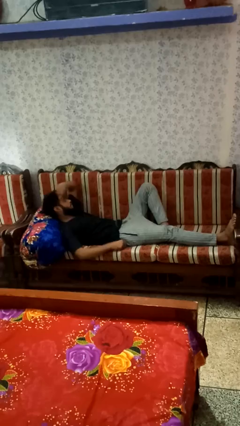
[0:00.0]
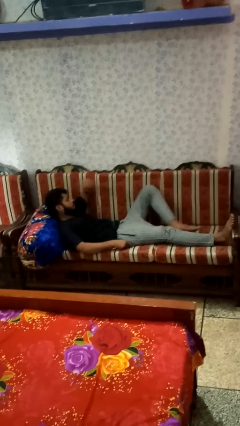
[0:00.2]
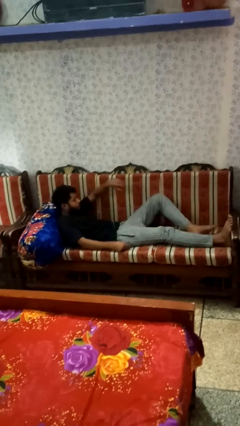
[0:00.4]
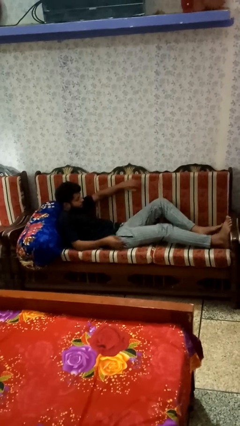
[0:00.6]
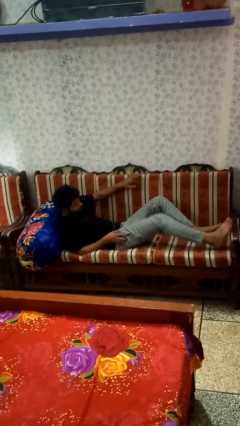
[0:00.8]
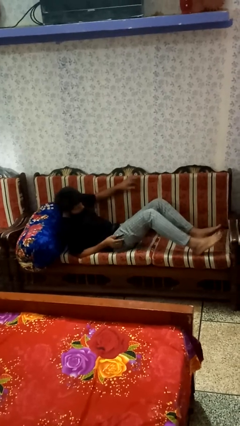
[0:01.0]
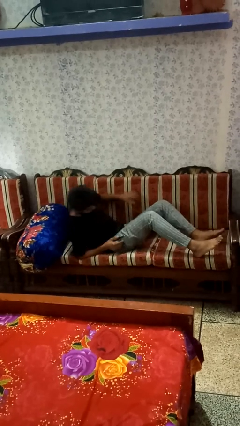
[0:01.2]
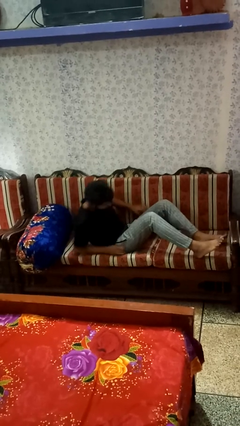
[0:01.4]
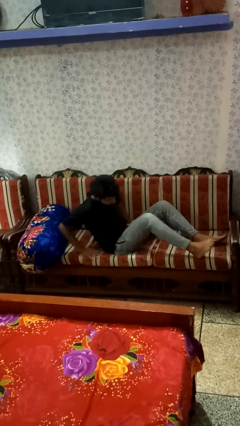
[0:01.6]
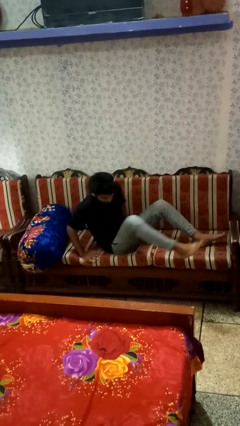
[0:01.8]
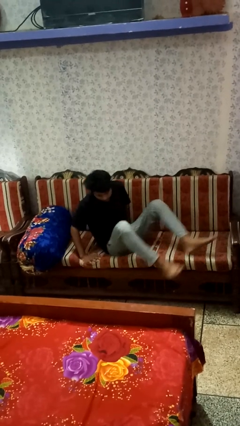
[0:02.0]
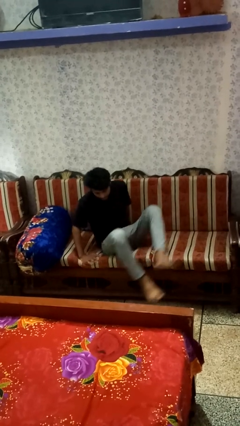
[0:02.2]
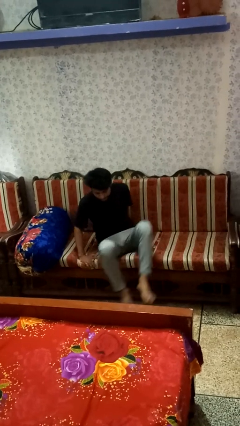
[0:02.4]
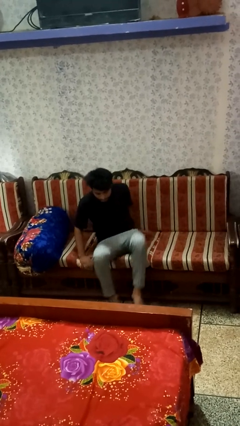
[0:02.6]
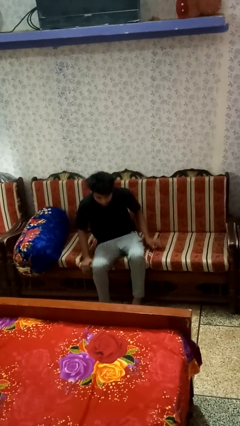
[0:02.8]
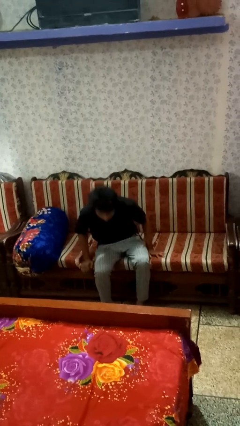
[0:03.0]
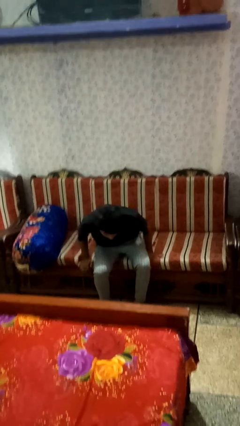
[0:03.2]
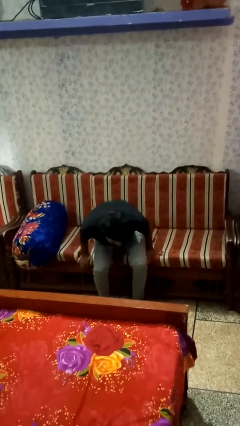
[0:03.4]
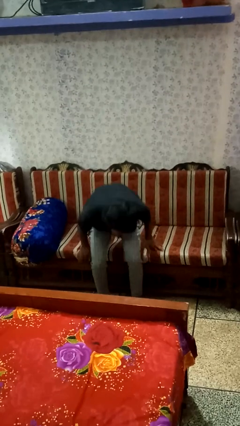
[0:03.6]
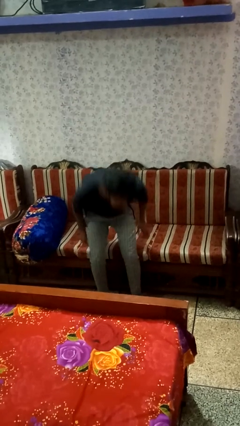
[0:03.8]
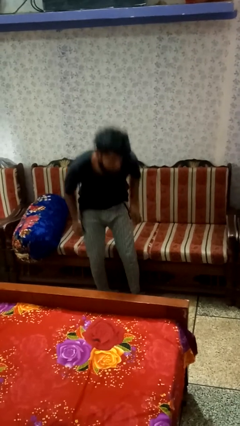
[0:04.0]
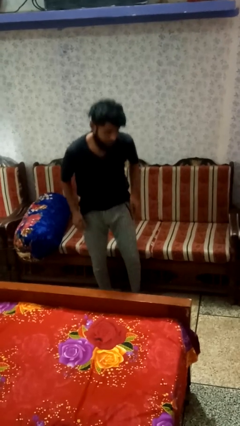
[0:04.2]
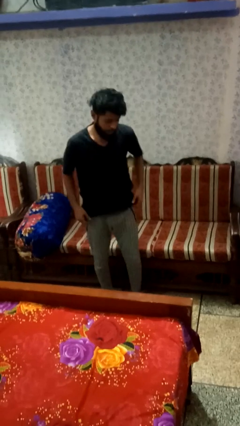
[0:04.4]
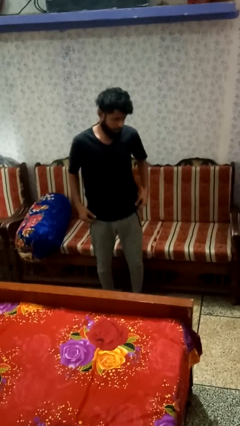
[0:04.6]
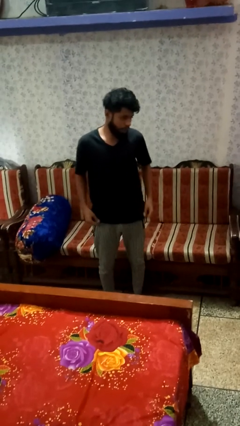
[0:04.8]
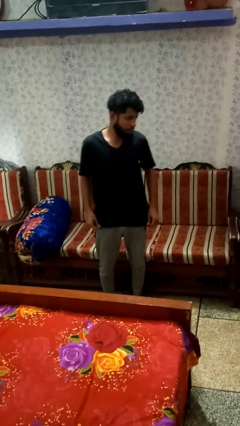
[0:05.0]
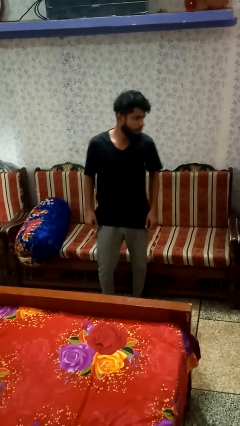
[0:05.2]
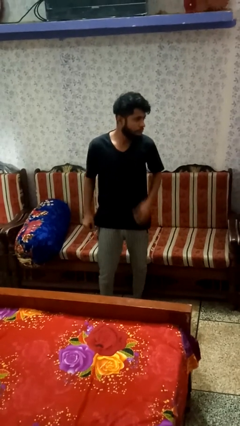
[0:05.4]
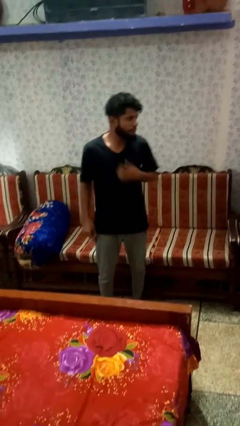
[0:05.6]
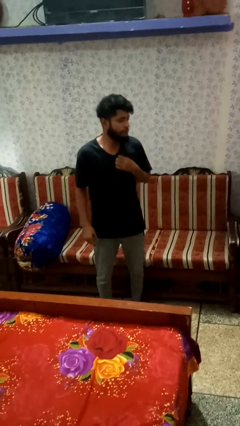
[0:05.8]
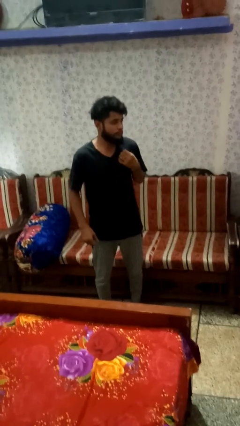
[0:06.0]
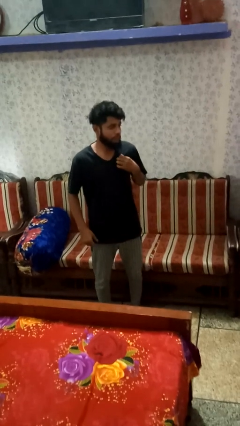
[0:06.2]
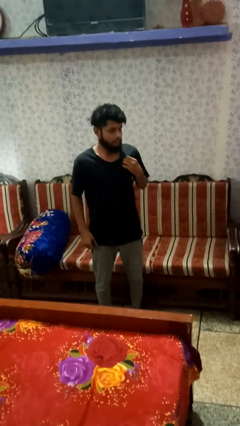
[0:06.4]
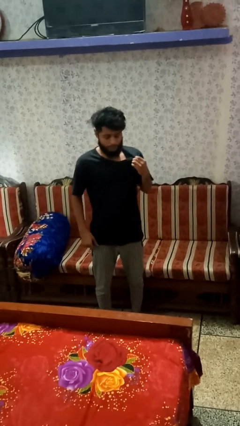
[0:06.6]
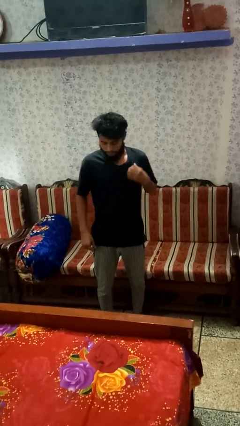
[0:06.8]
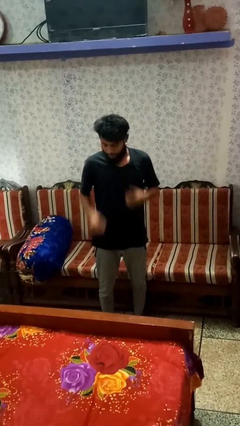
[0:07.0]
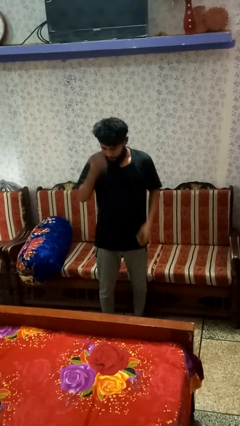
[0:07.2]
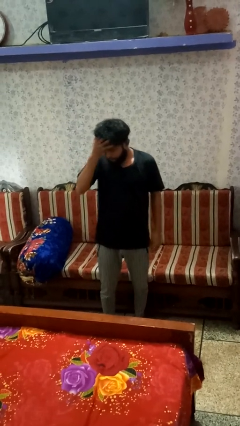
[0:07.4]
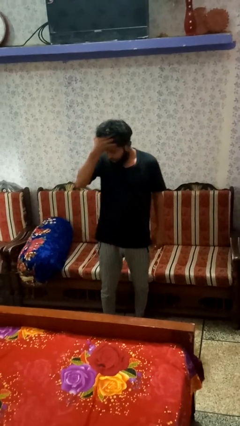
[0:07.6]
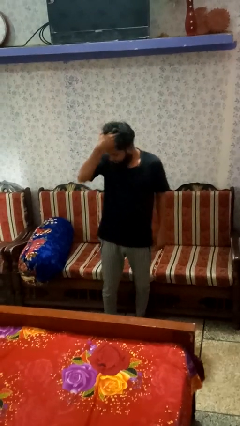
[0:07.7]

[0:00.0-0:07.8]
person stands up

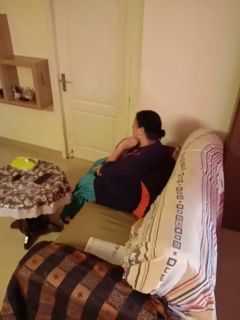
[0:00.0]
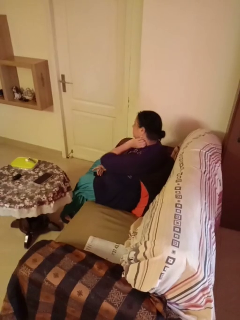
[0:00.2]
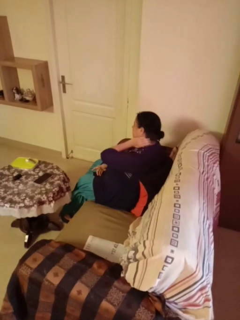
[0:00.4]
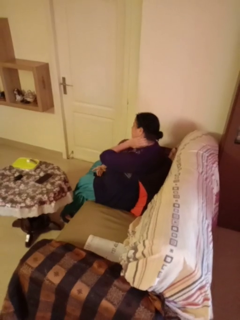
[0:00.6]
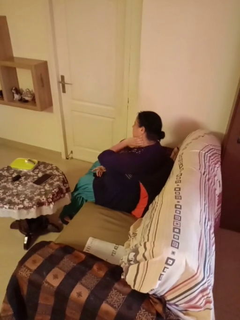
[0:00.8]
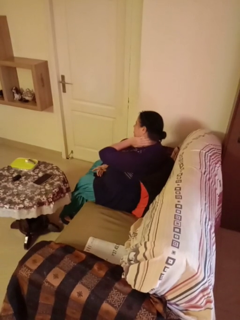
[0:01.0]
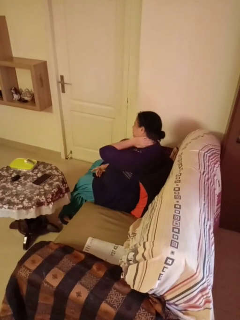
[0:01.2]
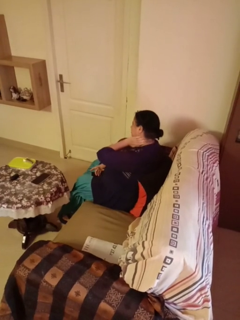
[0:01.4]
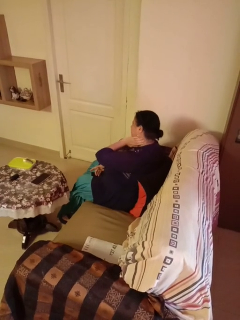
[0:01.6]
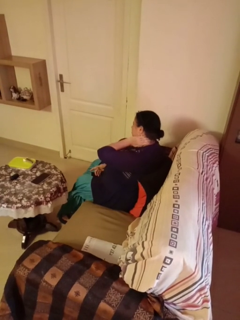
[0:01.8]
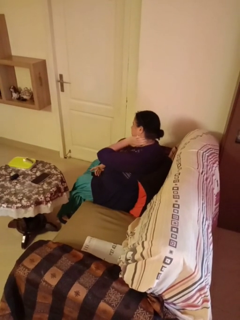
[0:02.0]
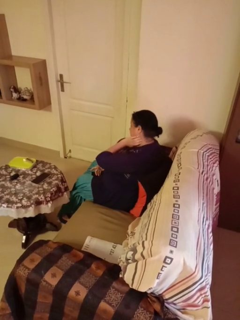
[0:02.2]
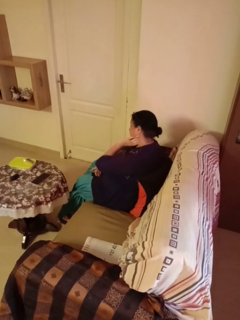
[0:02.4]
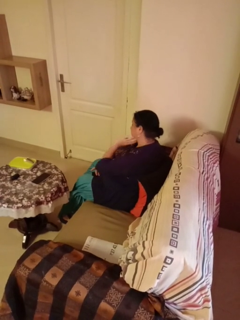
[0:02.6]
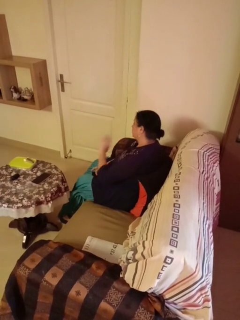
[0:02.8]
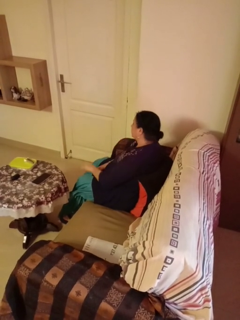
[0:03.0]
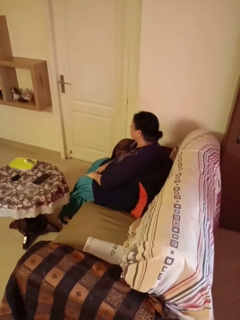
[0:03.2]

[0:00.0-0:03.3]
person rubs neck

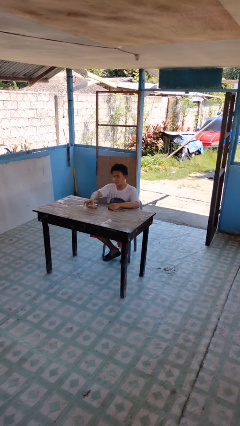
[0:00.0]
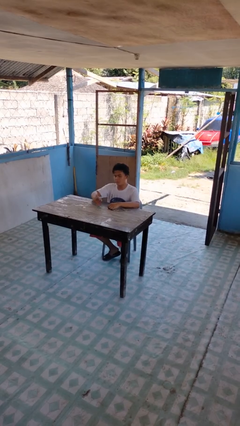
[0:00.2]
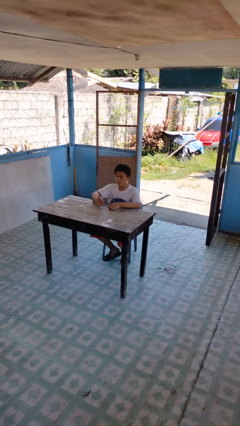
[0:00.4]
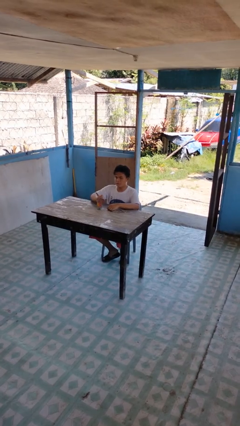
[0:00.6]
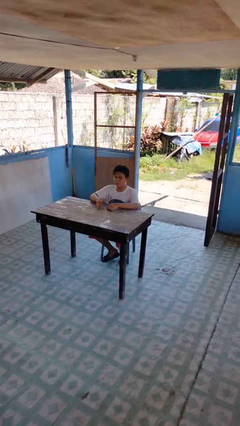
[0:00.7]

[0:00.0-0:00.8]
person sets upright glass

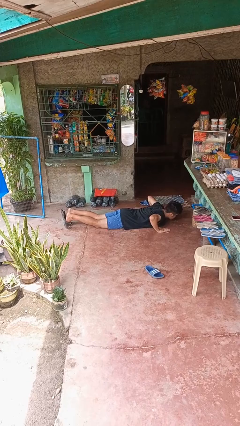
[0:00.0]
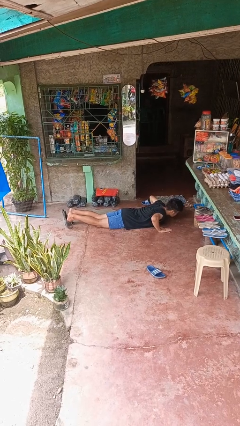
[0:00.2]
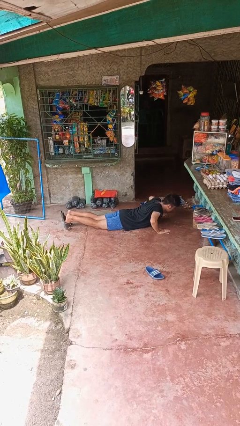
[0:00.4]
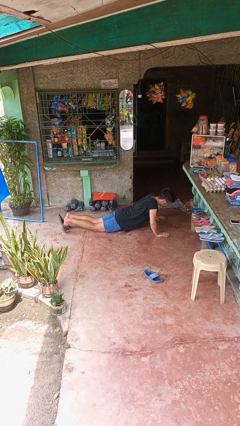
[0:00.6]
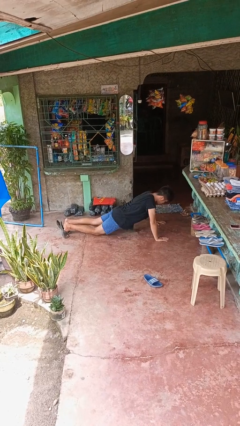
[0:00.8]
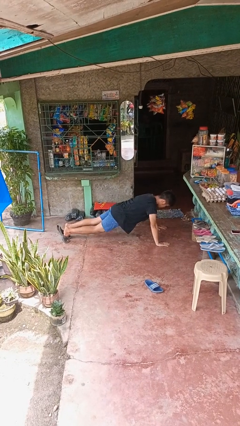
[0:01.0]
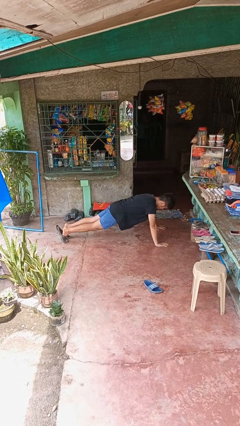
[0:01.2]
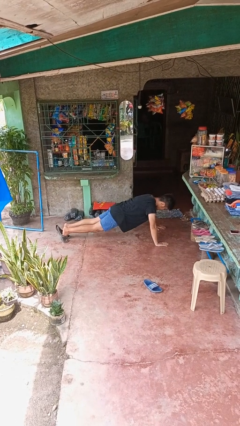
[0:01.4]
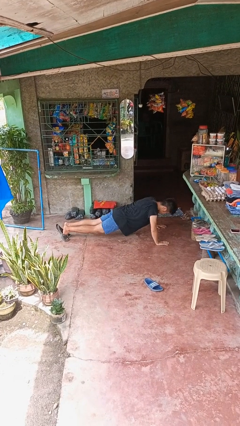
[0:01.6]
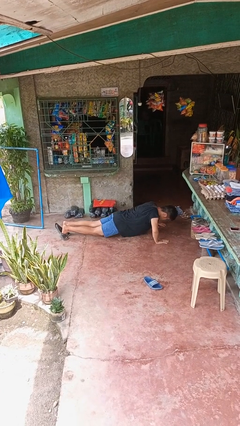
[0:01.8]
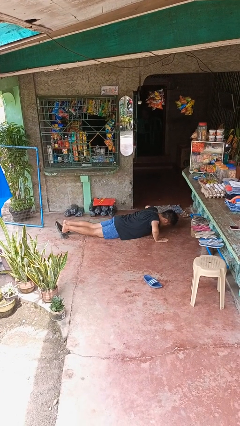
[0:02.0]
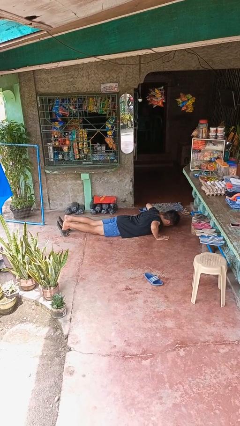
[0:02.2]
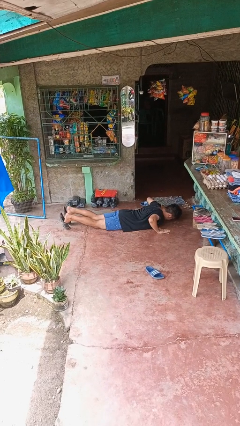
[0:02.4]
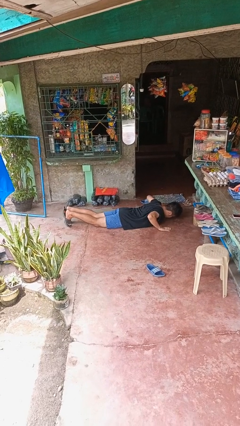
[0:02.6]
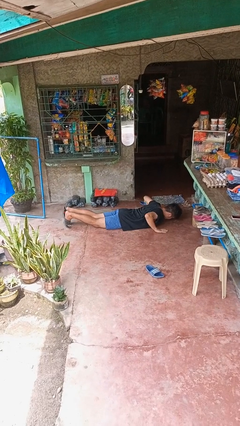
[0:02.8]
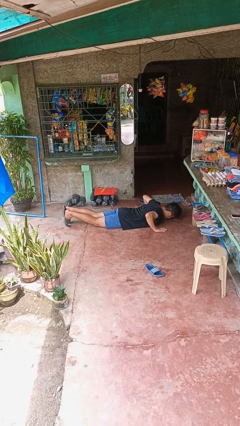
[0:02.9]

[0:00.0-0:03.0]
person exercises with pushup

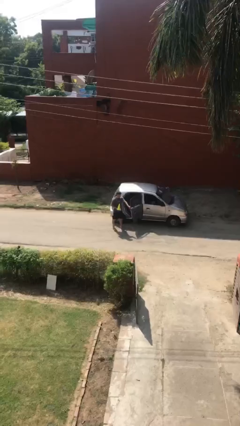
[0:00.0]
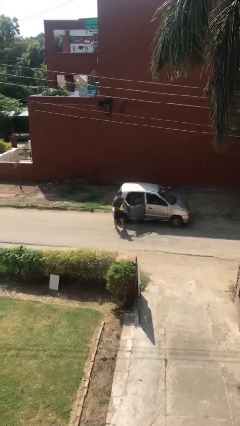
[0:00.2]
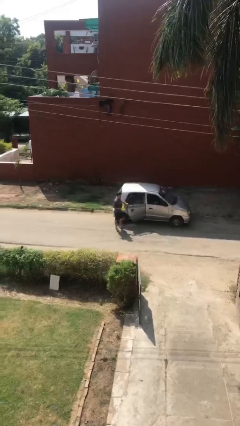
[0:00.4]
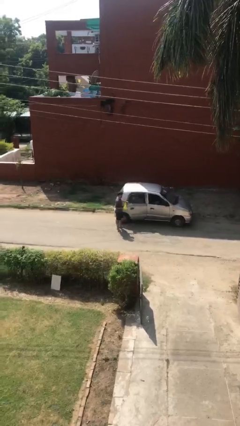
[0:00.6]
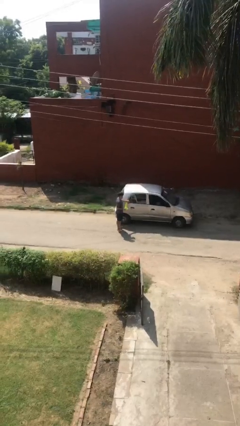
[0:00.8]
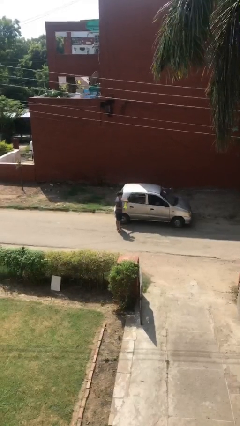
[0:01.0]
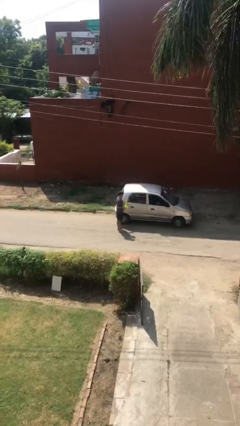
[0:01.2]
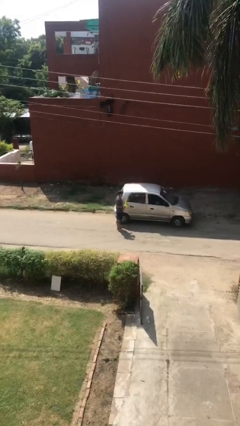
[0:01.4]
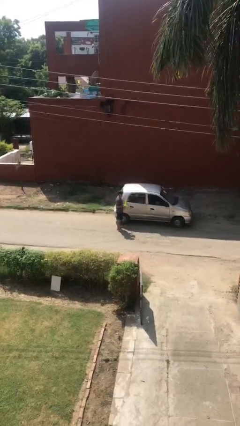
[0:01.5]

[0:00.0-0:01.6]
person closes car door

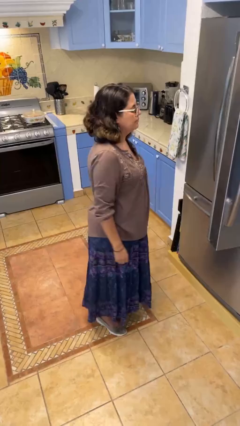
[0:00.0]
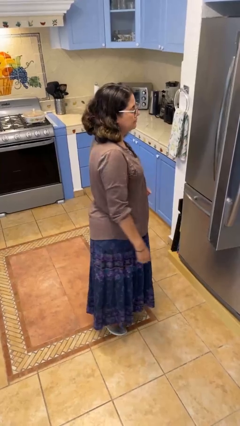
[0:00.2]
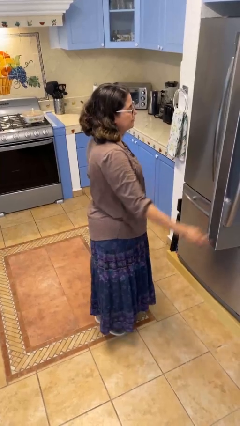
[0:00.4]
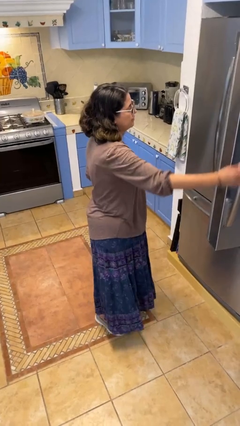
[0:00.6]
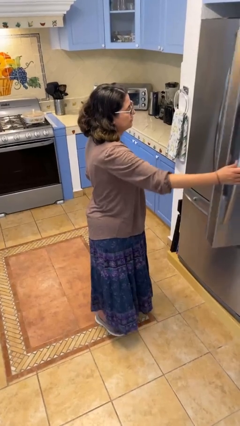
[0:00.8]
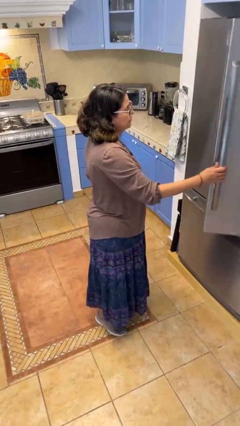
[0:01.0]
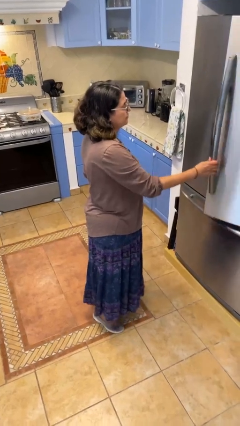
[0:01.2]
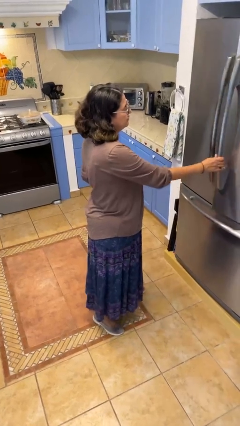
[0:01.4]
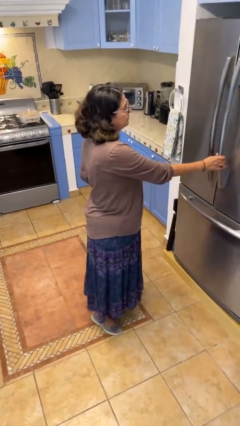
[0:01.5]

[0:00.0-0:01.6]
person closes refrigerator

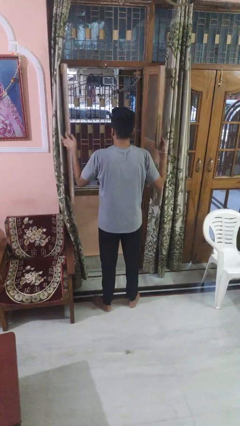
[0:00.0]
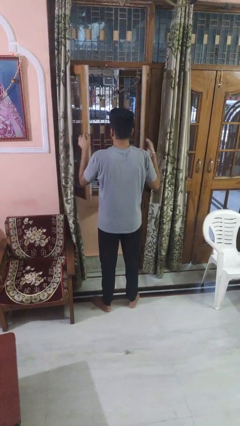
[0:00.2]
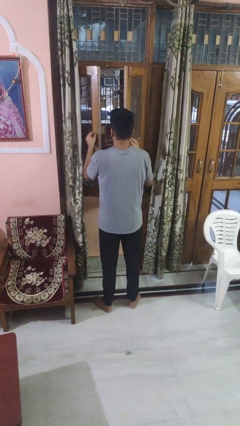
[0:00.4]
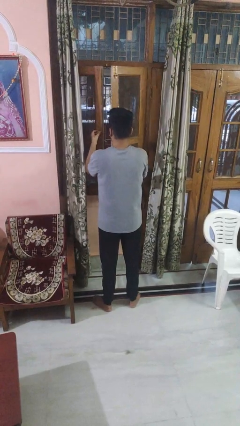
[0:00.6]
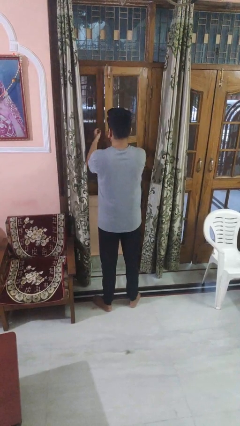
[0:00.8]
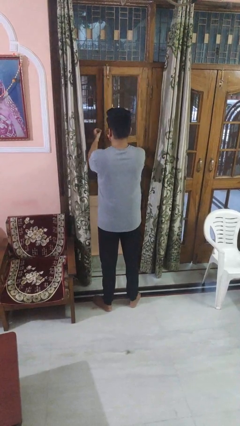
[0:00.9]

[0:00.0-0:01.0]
person closes home window
